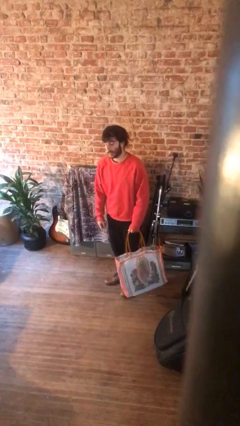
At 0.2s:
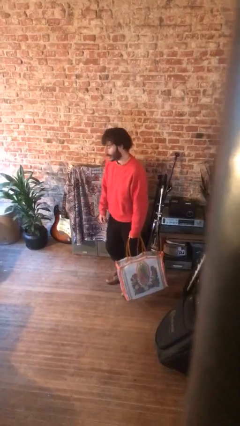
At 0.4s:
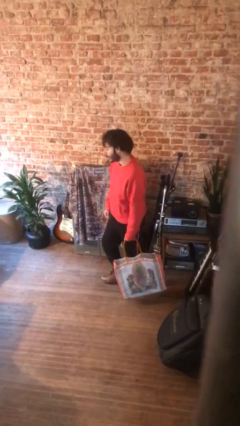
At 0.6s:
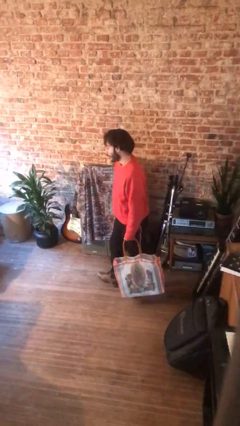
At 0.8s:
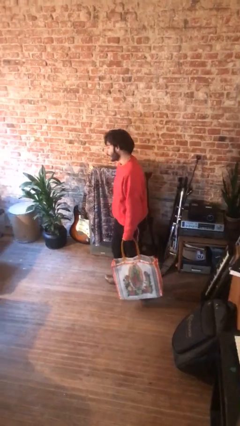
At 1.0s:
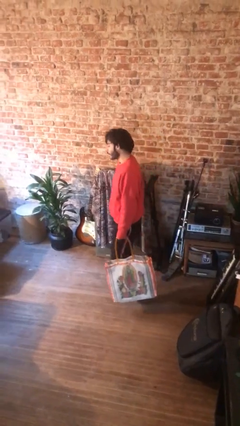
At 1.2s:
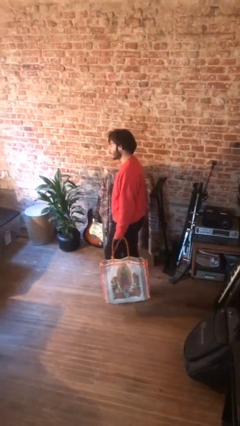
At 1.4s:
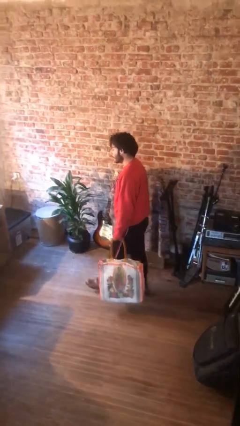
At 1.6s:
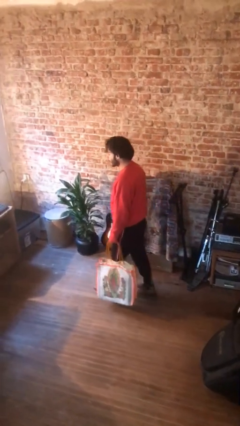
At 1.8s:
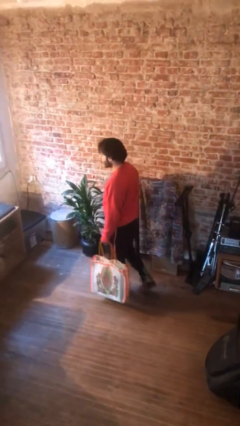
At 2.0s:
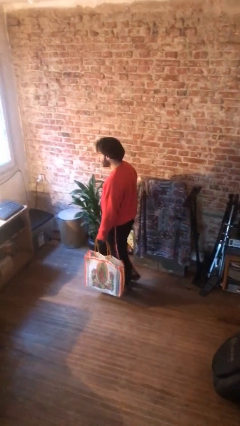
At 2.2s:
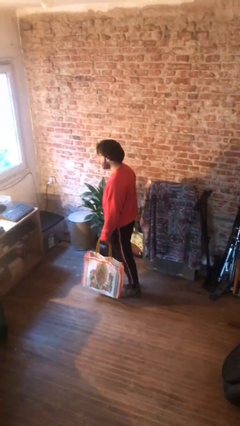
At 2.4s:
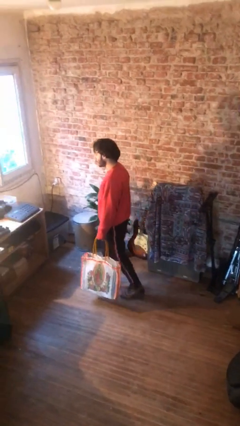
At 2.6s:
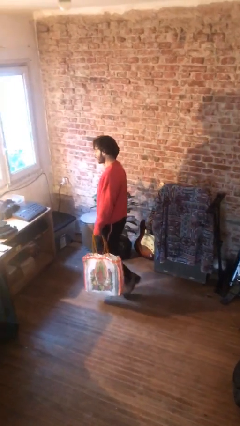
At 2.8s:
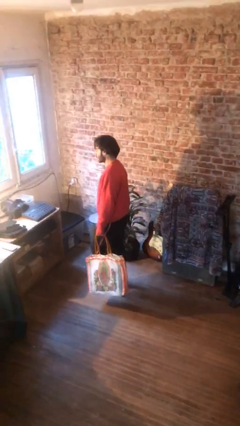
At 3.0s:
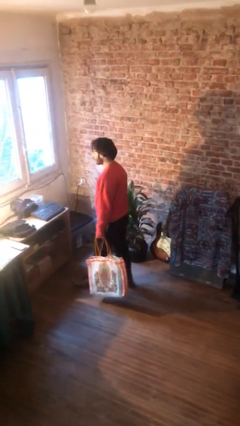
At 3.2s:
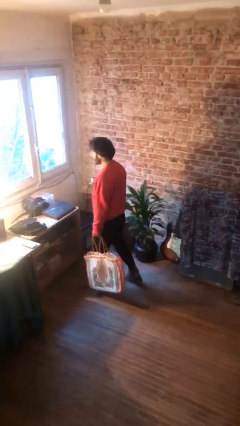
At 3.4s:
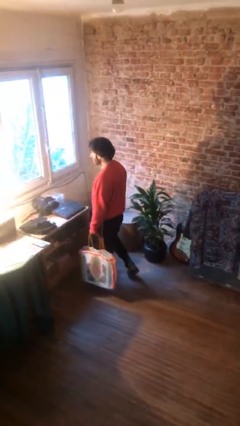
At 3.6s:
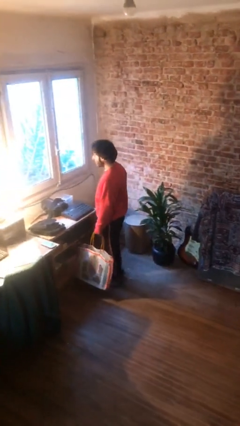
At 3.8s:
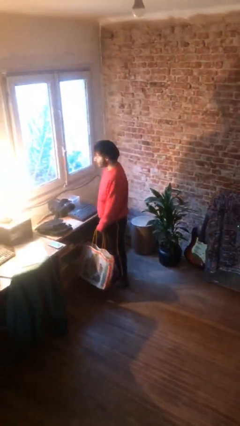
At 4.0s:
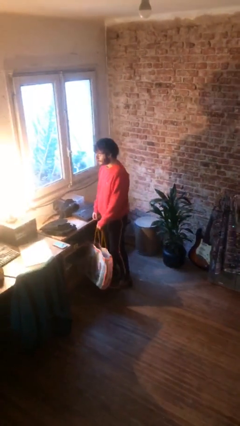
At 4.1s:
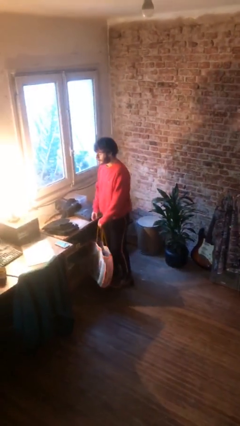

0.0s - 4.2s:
person carries groceries

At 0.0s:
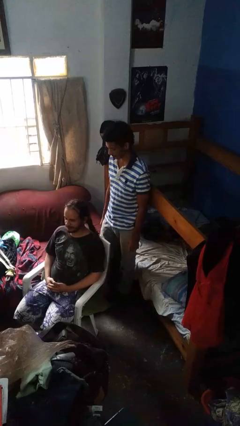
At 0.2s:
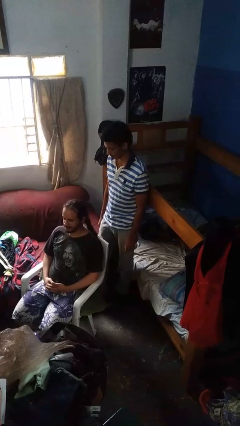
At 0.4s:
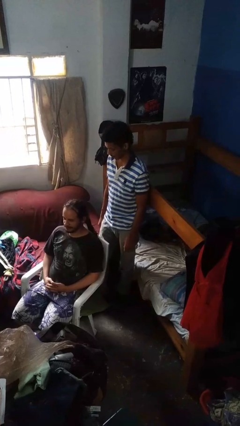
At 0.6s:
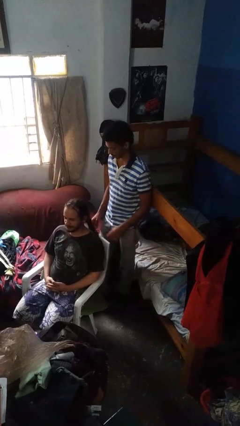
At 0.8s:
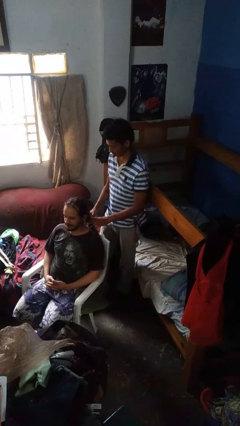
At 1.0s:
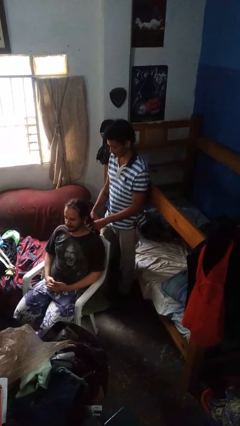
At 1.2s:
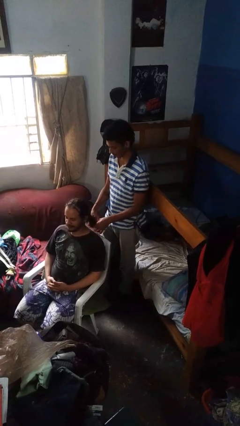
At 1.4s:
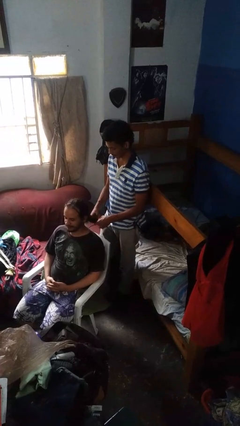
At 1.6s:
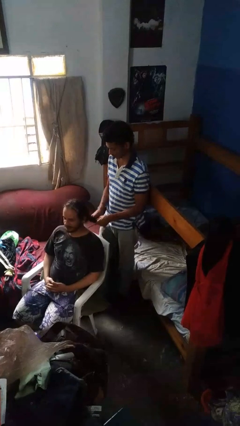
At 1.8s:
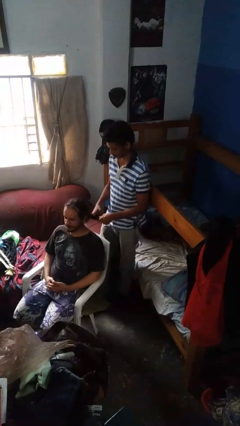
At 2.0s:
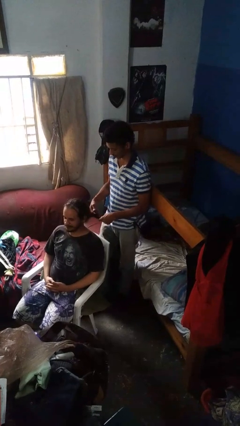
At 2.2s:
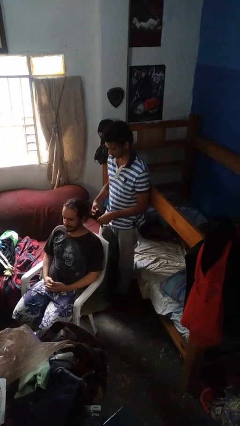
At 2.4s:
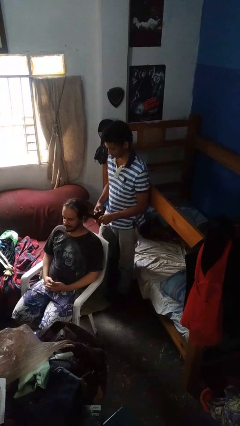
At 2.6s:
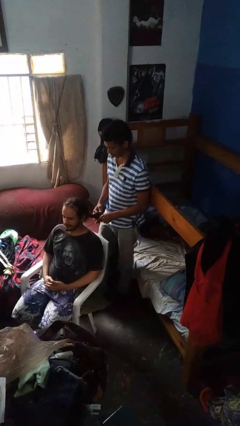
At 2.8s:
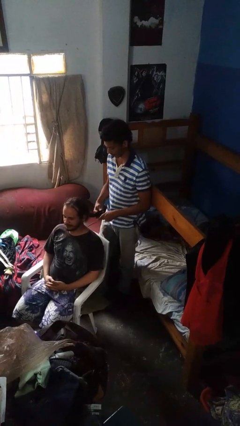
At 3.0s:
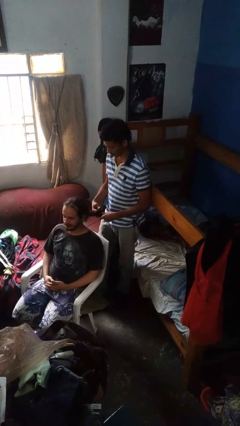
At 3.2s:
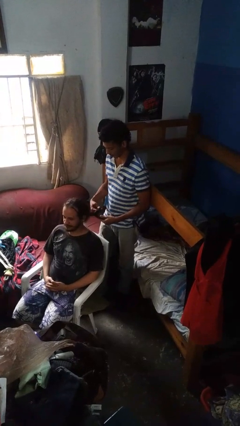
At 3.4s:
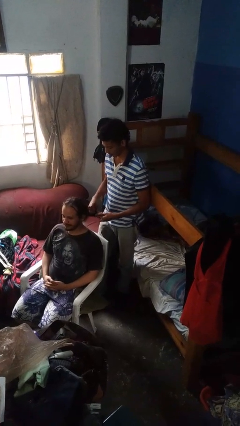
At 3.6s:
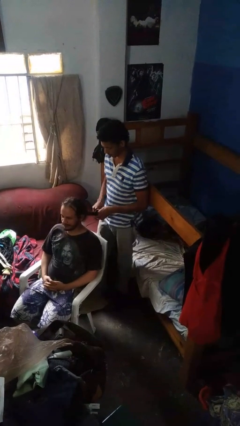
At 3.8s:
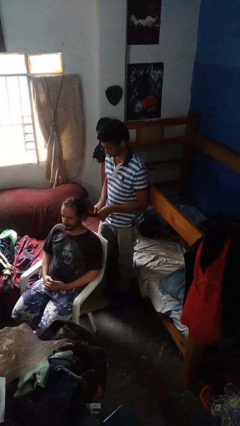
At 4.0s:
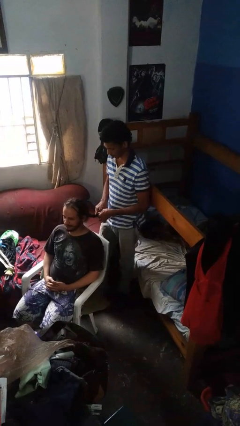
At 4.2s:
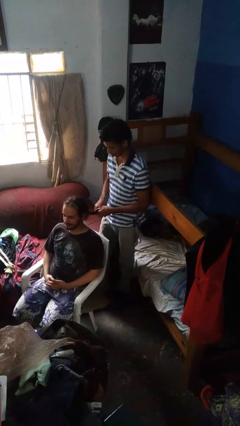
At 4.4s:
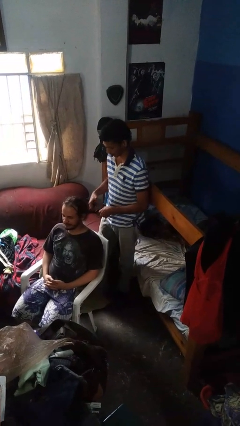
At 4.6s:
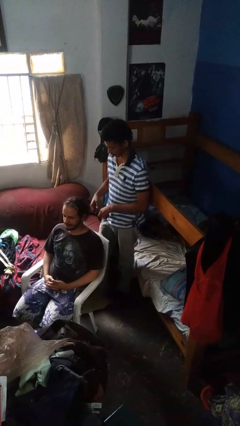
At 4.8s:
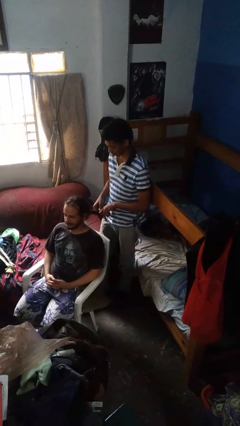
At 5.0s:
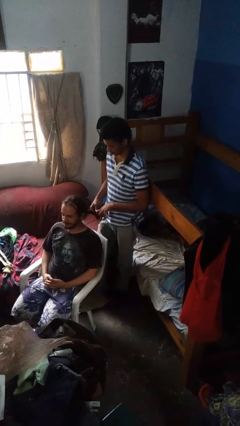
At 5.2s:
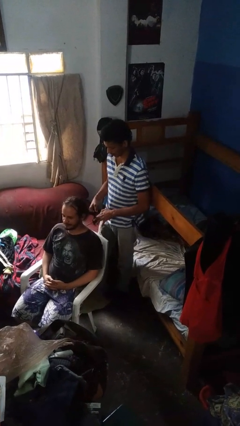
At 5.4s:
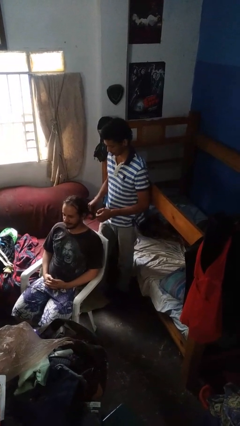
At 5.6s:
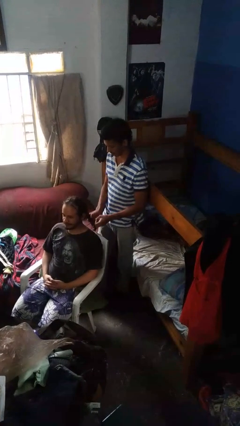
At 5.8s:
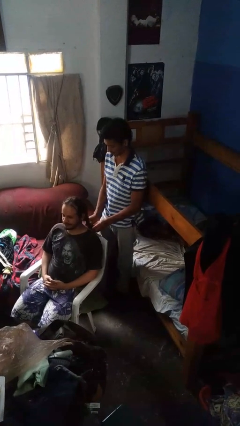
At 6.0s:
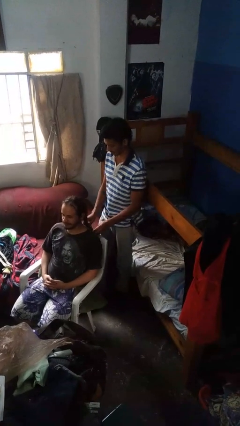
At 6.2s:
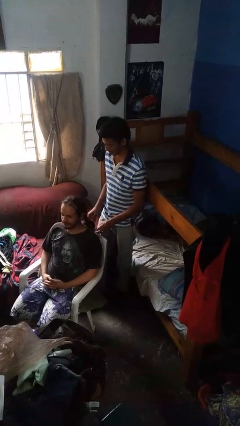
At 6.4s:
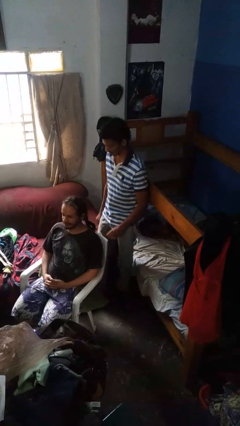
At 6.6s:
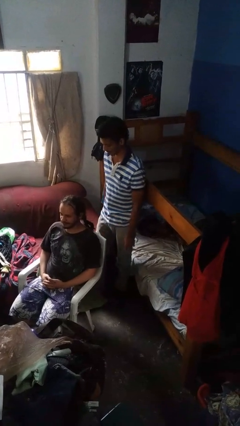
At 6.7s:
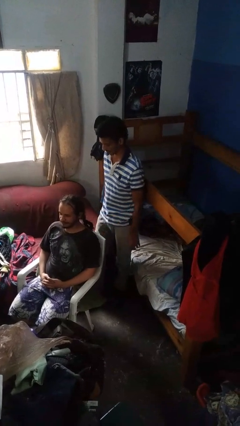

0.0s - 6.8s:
person braids hair of person

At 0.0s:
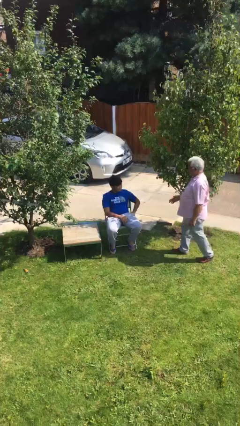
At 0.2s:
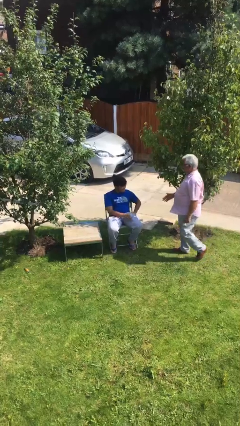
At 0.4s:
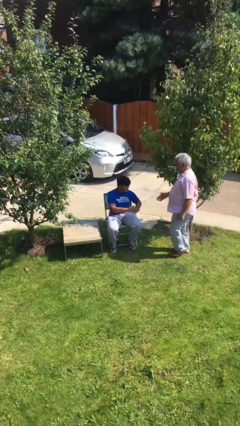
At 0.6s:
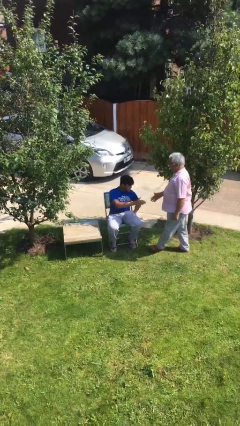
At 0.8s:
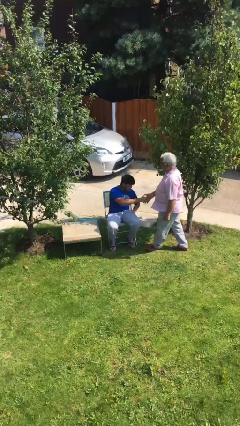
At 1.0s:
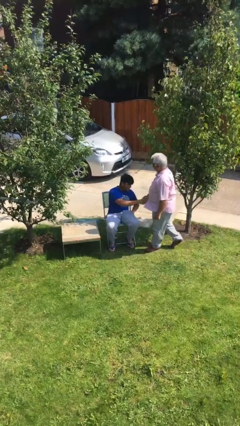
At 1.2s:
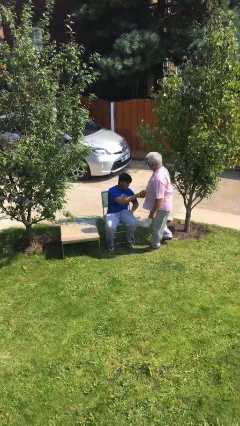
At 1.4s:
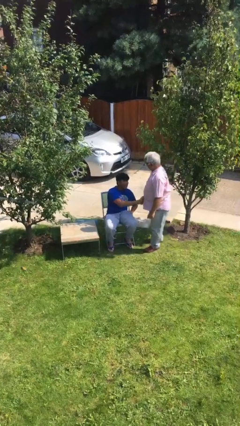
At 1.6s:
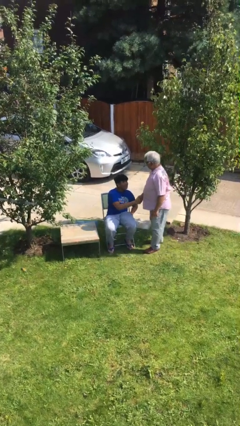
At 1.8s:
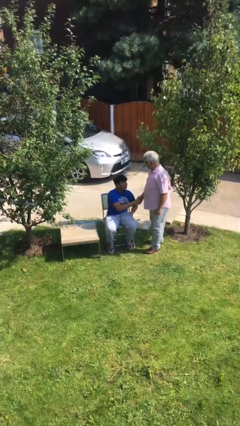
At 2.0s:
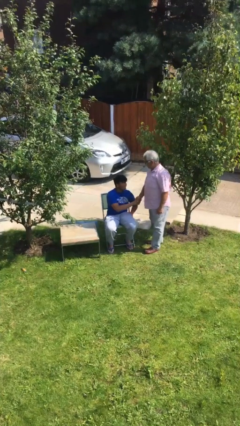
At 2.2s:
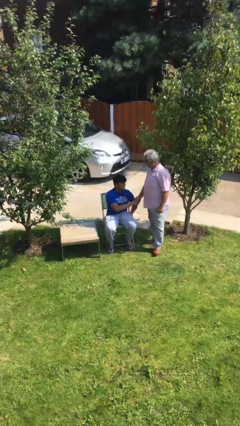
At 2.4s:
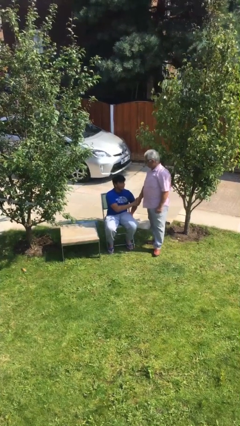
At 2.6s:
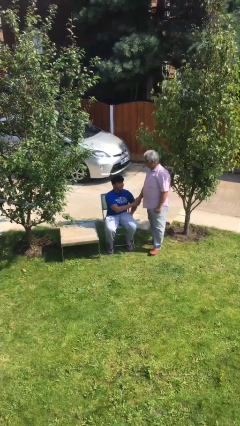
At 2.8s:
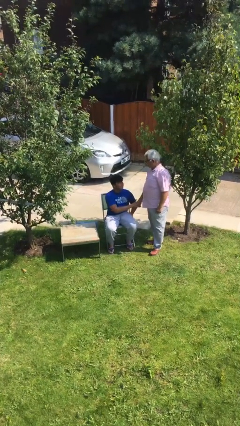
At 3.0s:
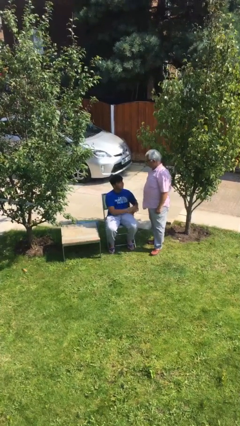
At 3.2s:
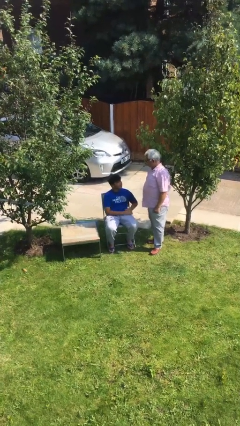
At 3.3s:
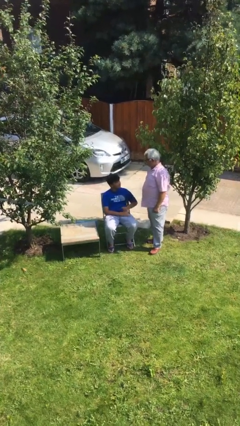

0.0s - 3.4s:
person shakes hand

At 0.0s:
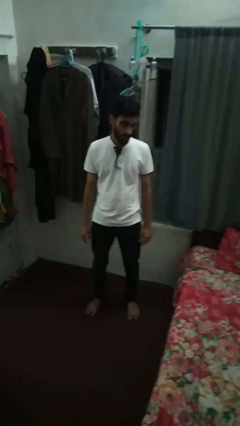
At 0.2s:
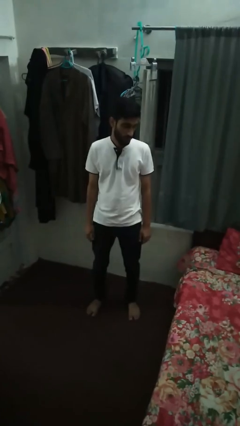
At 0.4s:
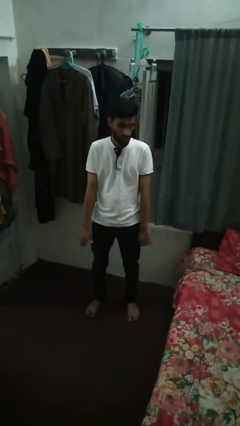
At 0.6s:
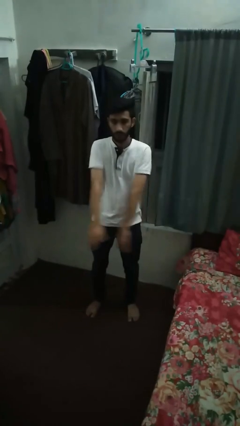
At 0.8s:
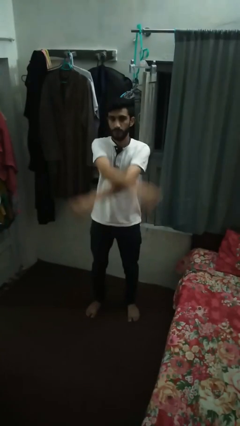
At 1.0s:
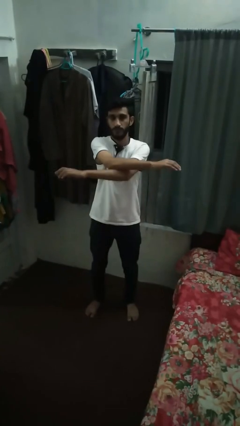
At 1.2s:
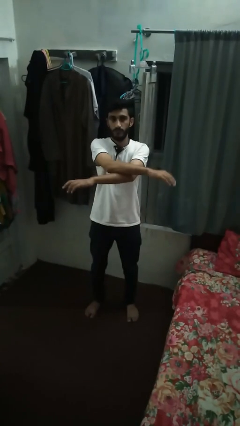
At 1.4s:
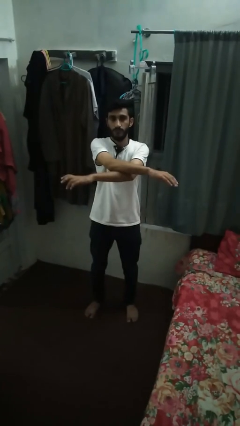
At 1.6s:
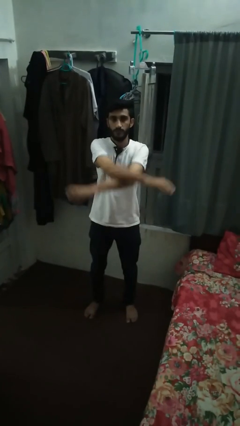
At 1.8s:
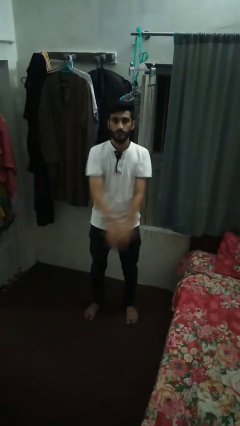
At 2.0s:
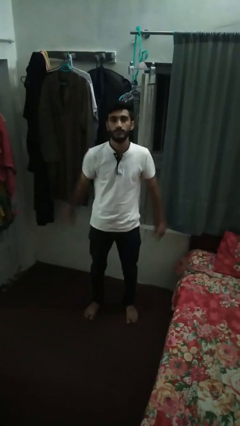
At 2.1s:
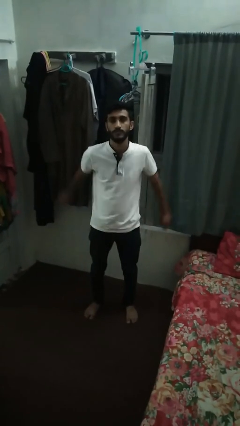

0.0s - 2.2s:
person gestures arms x

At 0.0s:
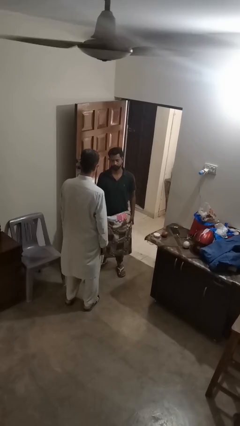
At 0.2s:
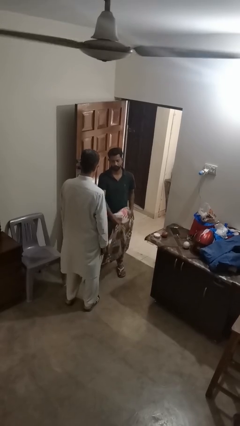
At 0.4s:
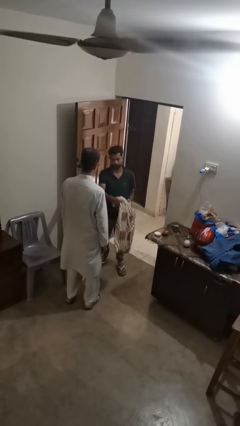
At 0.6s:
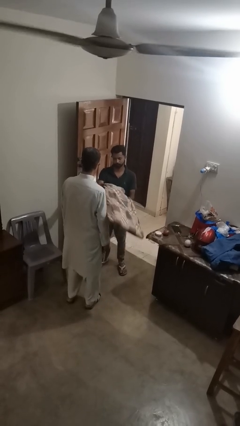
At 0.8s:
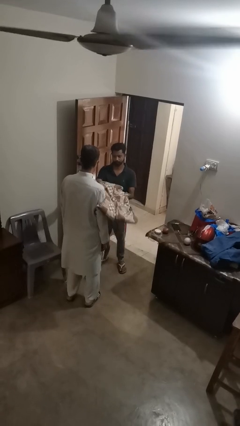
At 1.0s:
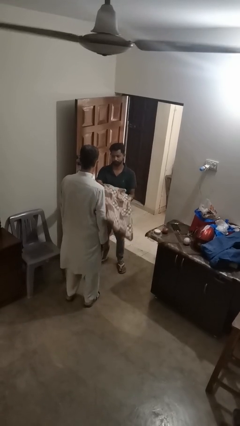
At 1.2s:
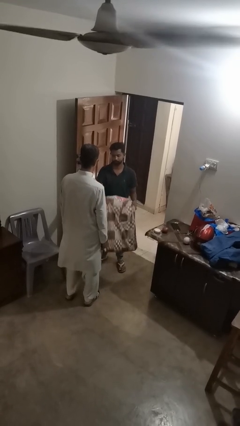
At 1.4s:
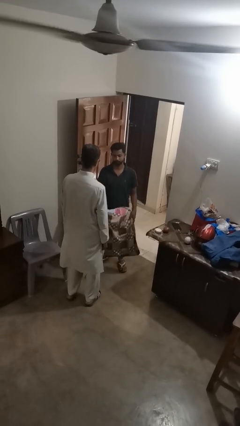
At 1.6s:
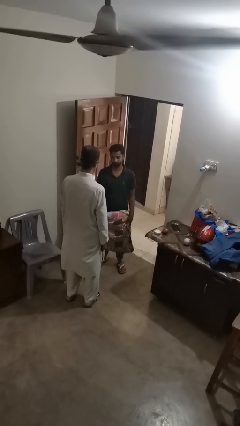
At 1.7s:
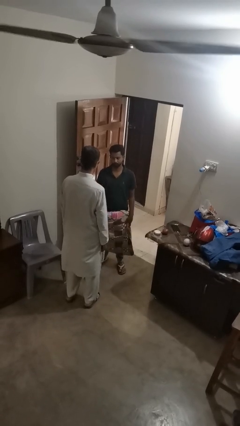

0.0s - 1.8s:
person hits person with pillow
